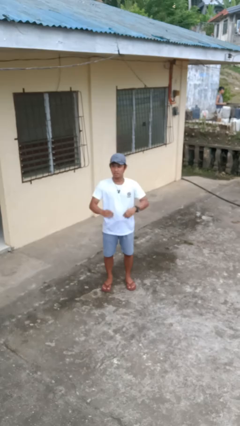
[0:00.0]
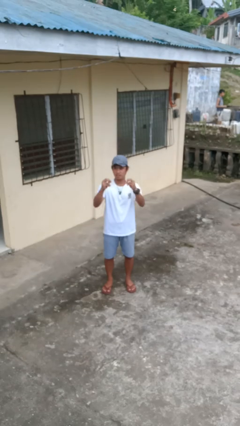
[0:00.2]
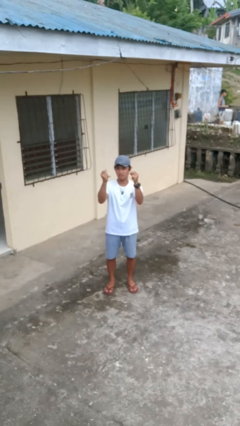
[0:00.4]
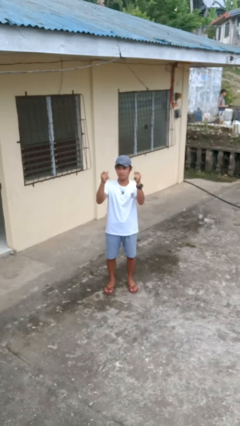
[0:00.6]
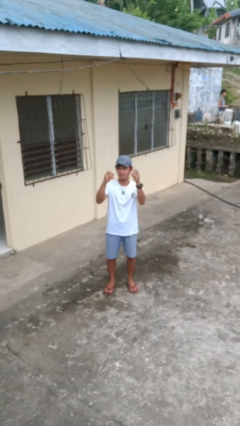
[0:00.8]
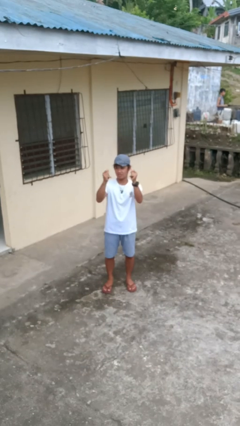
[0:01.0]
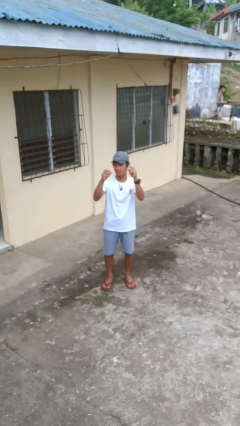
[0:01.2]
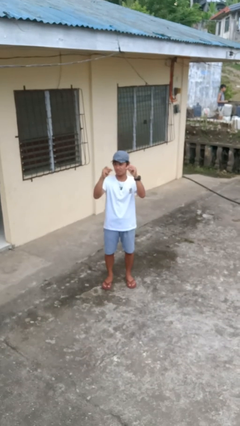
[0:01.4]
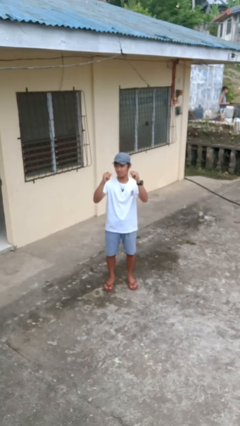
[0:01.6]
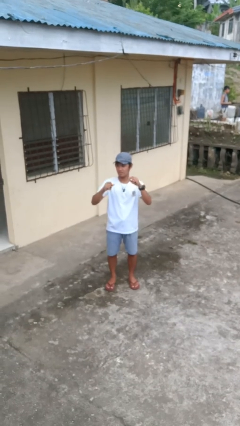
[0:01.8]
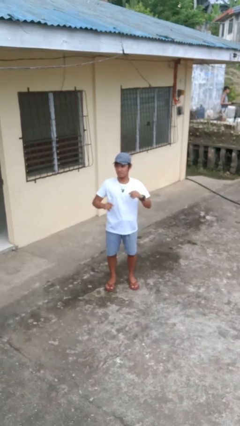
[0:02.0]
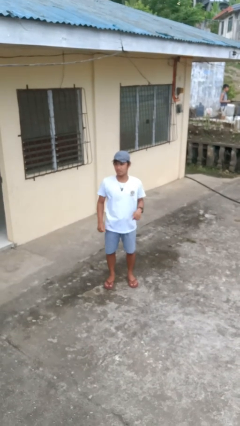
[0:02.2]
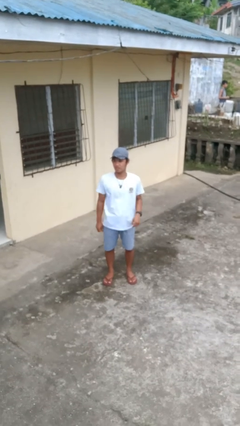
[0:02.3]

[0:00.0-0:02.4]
person snaps fingers

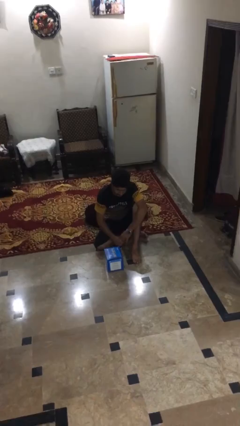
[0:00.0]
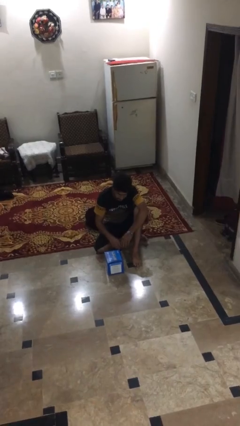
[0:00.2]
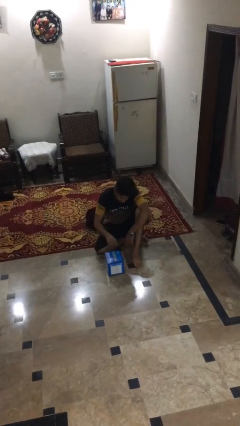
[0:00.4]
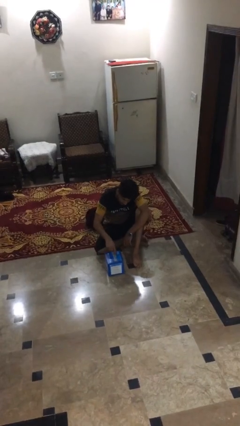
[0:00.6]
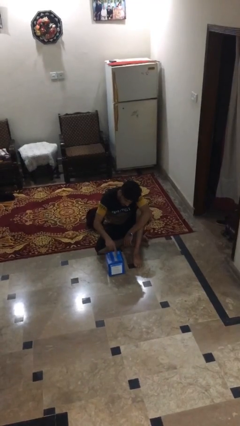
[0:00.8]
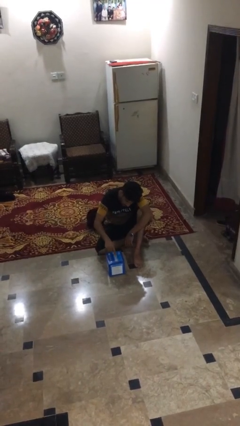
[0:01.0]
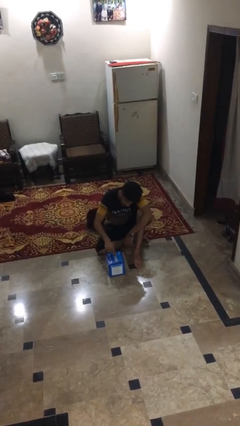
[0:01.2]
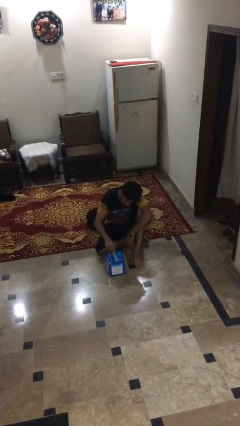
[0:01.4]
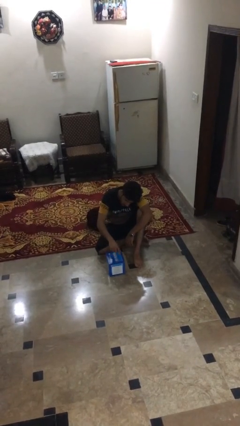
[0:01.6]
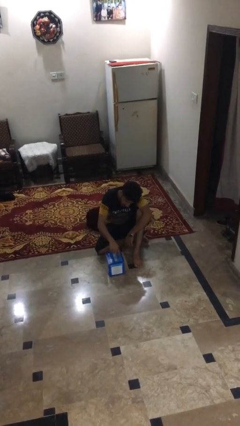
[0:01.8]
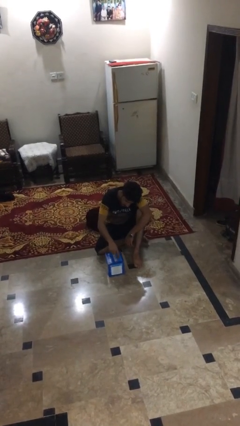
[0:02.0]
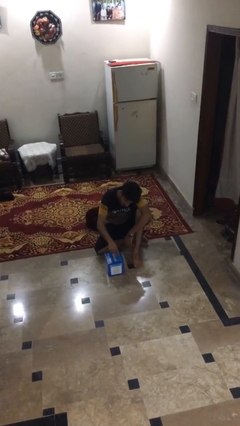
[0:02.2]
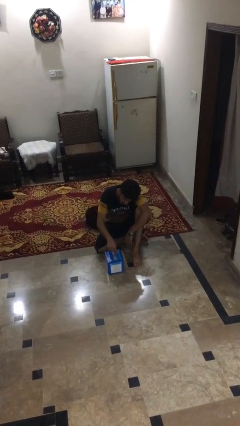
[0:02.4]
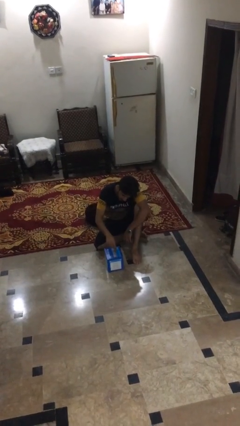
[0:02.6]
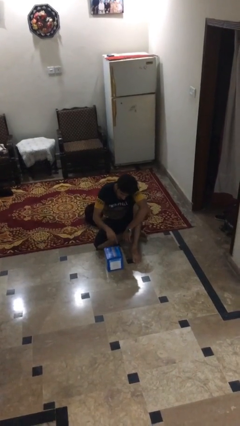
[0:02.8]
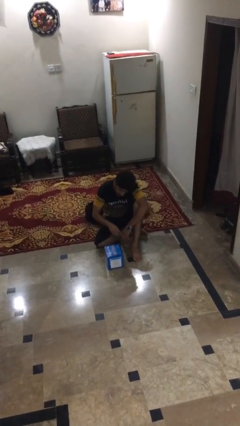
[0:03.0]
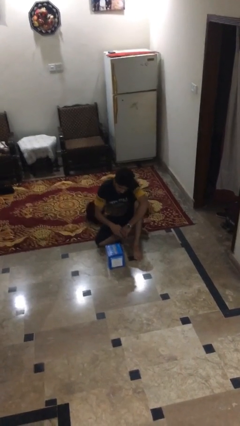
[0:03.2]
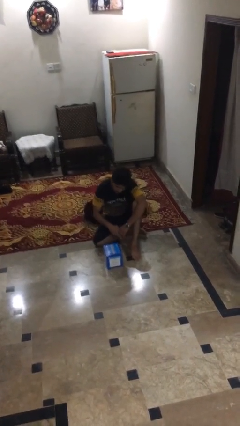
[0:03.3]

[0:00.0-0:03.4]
person taps object with finger

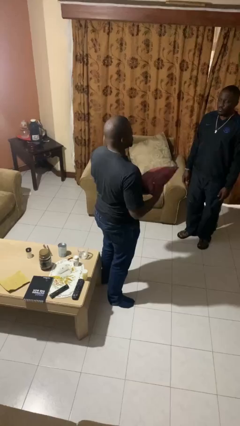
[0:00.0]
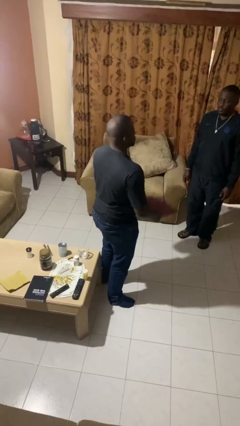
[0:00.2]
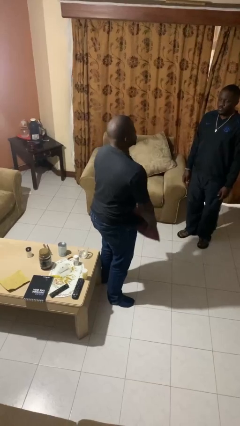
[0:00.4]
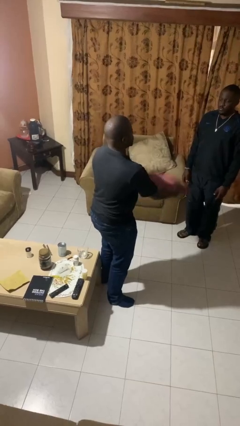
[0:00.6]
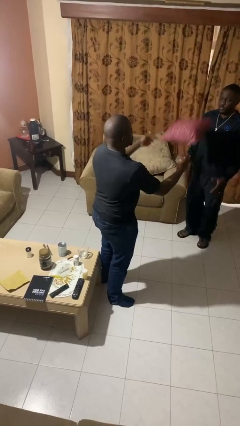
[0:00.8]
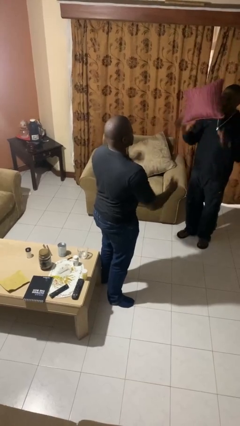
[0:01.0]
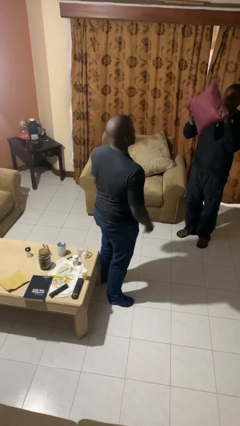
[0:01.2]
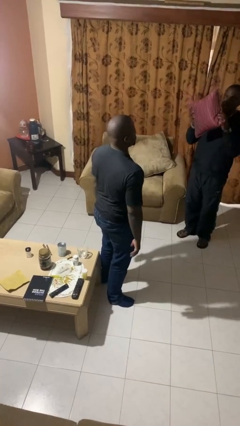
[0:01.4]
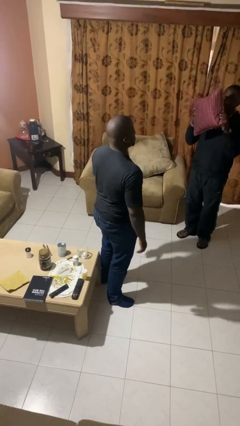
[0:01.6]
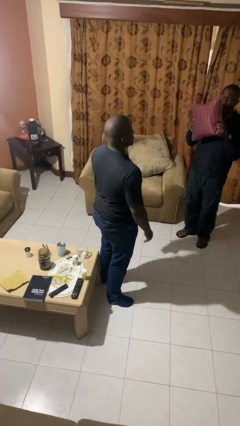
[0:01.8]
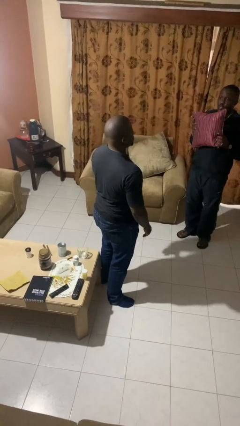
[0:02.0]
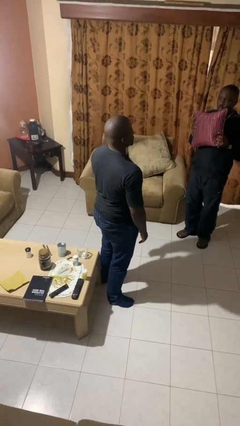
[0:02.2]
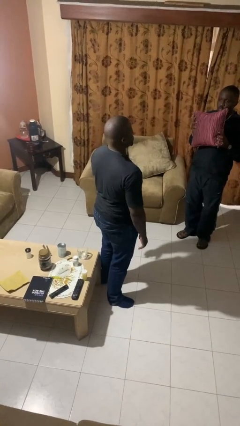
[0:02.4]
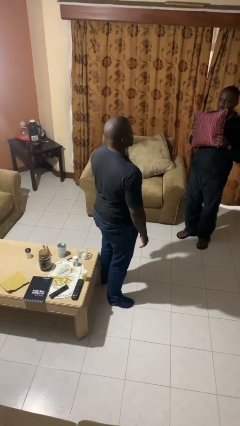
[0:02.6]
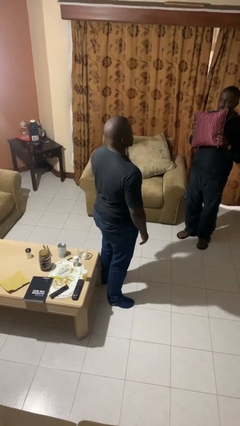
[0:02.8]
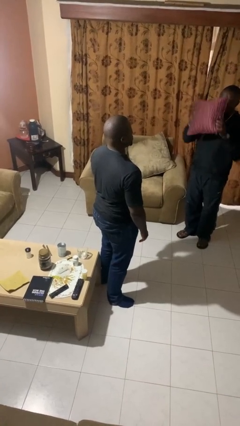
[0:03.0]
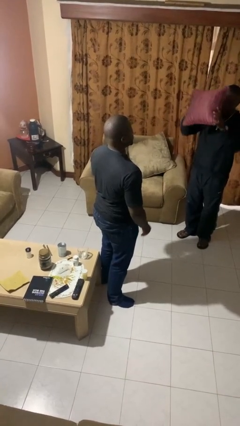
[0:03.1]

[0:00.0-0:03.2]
person throws object to person

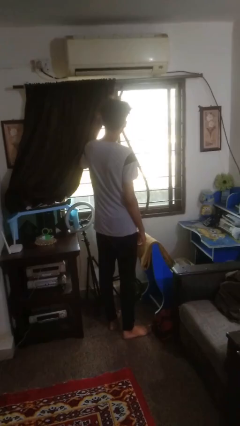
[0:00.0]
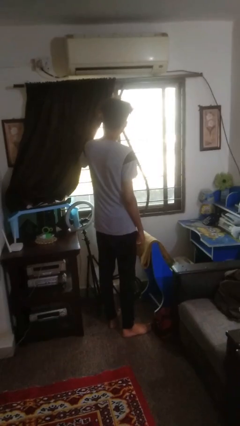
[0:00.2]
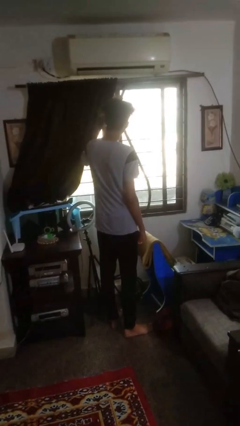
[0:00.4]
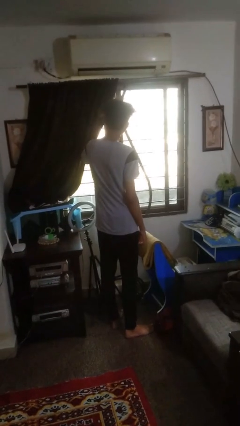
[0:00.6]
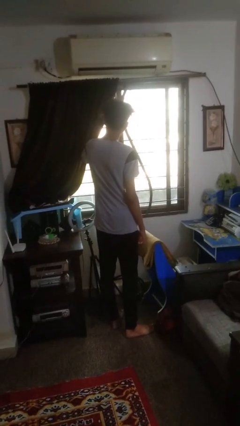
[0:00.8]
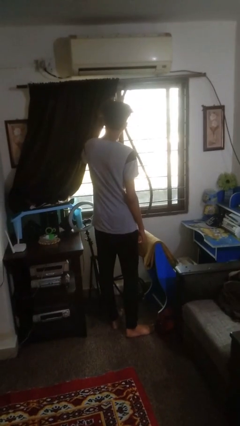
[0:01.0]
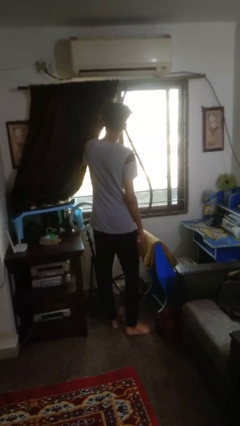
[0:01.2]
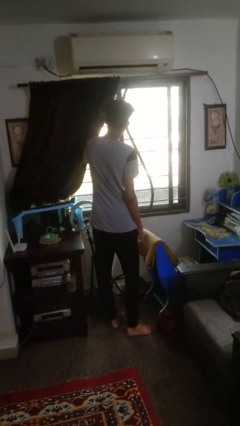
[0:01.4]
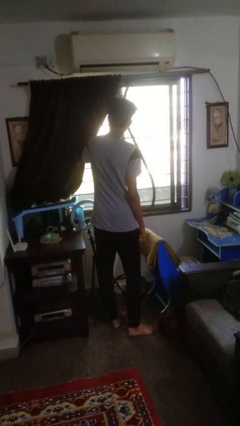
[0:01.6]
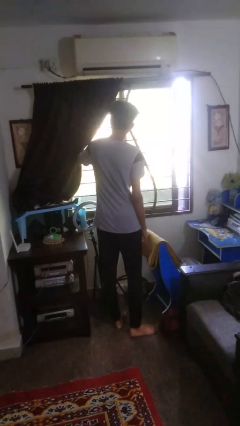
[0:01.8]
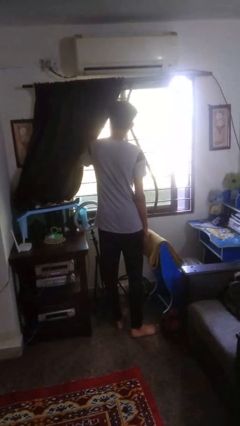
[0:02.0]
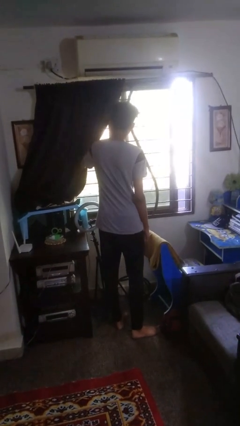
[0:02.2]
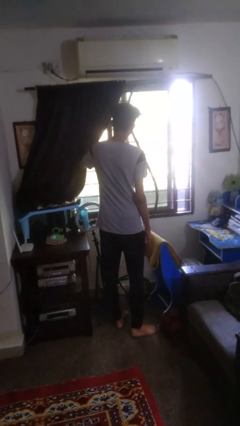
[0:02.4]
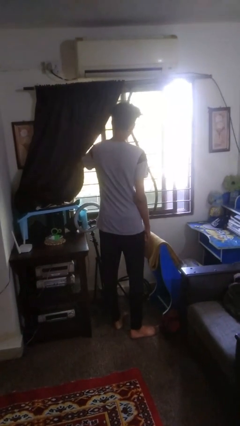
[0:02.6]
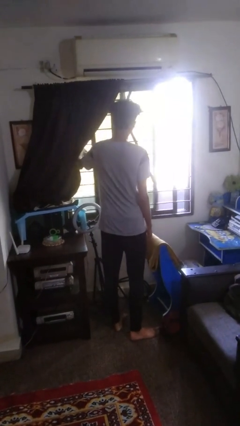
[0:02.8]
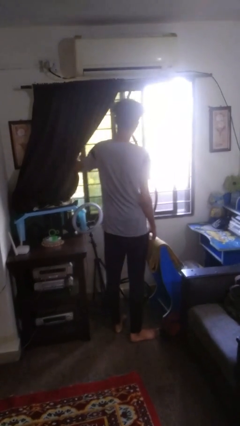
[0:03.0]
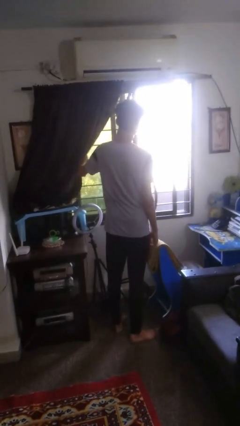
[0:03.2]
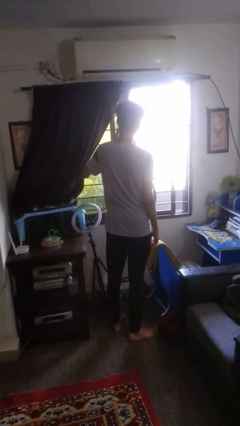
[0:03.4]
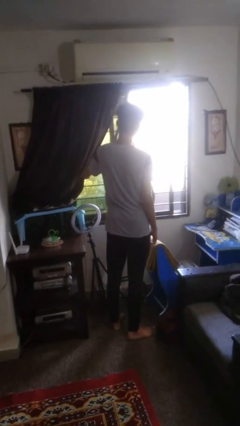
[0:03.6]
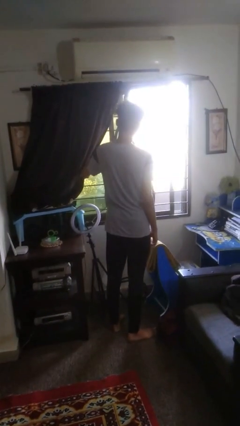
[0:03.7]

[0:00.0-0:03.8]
person opens home window

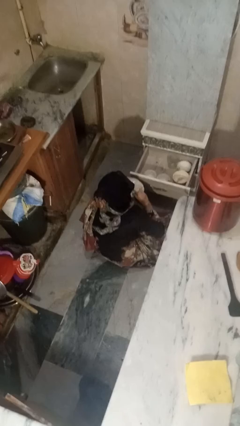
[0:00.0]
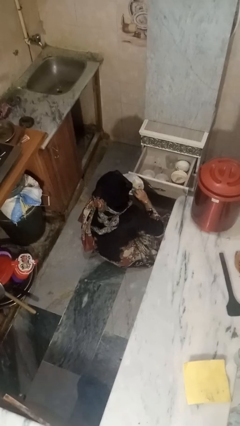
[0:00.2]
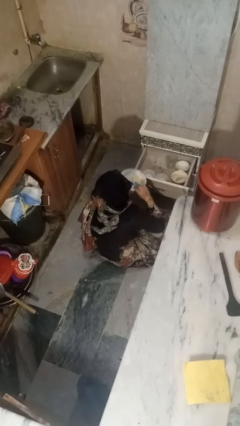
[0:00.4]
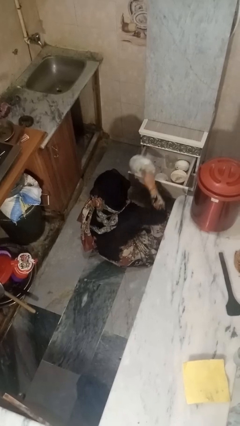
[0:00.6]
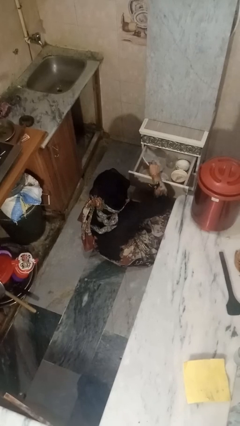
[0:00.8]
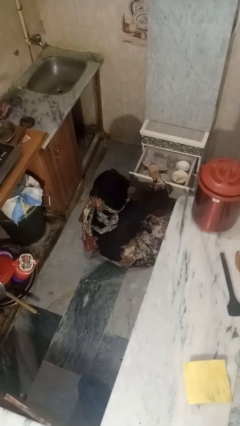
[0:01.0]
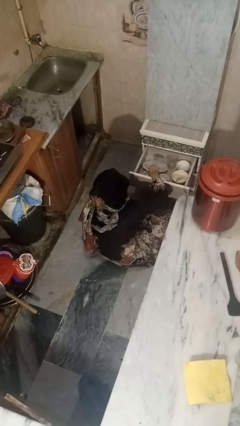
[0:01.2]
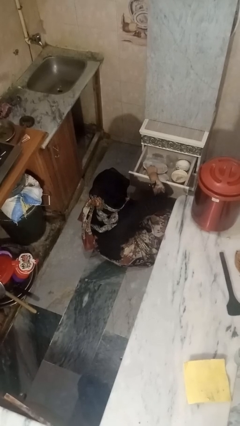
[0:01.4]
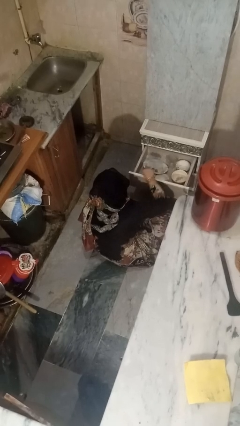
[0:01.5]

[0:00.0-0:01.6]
person puts object into kitchen drawer

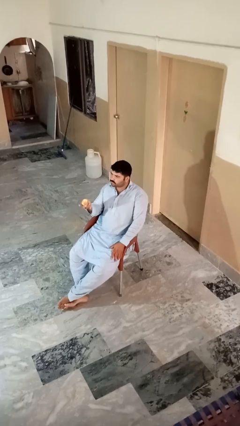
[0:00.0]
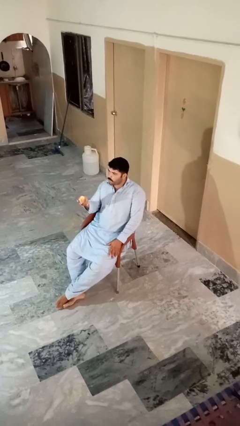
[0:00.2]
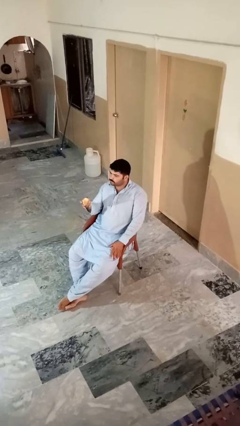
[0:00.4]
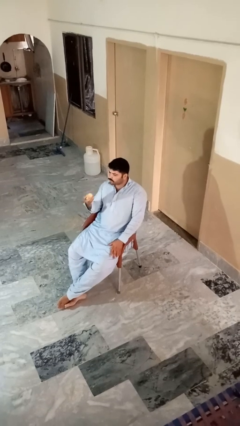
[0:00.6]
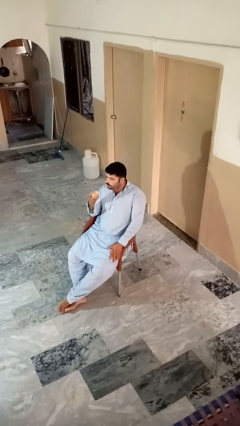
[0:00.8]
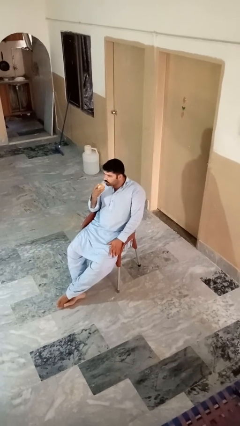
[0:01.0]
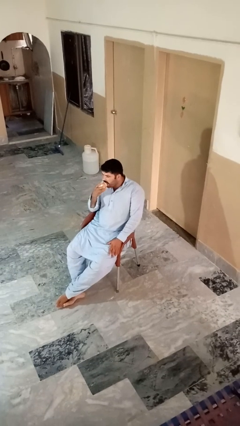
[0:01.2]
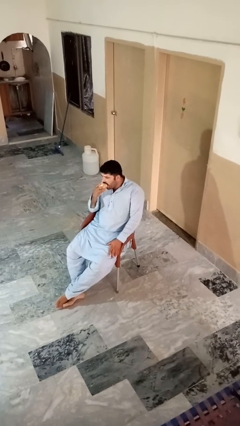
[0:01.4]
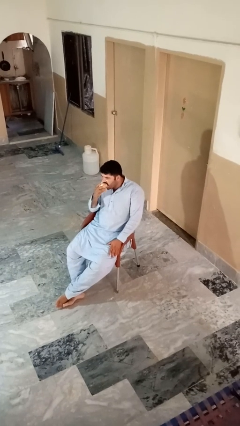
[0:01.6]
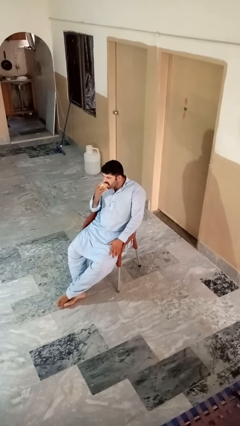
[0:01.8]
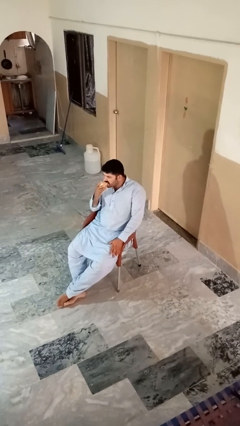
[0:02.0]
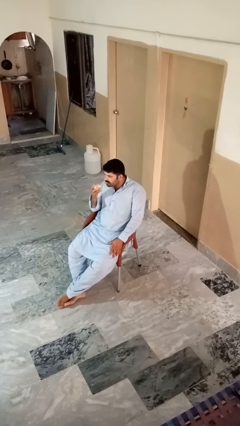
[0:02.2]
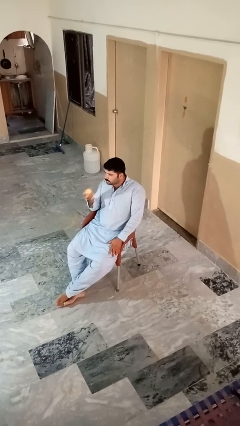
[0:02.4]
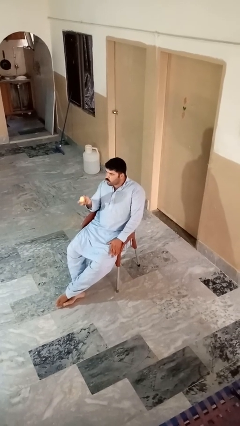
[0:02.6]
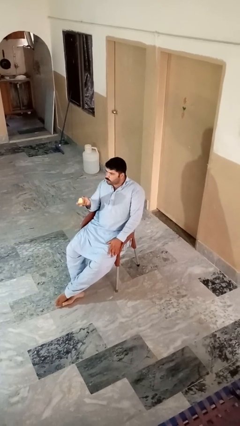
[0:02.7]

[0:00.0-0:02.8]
person eats apple
